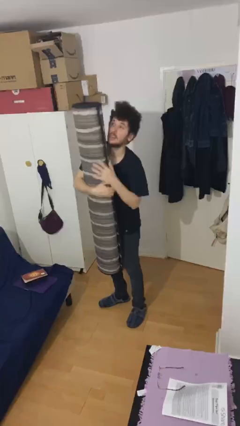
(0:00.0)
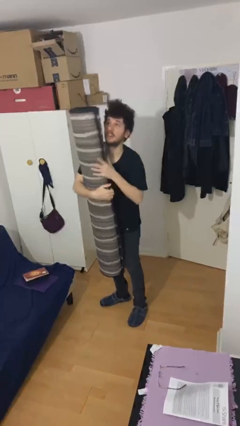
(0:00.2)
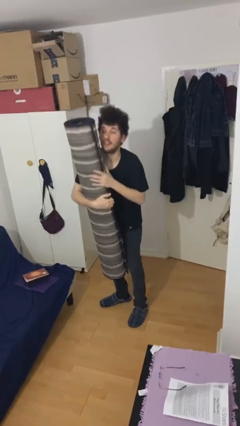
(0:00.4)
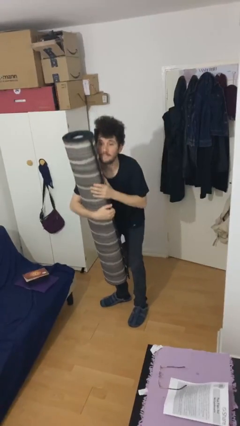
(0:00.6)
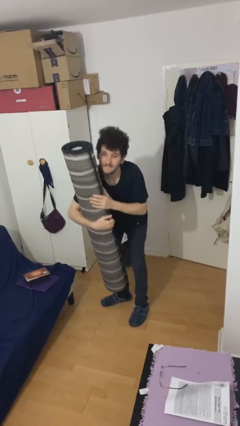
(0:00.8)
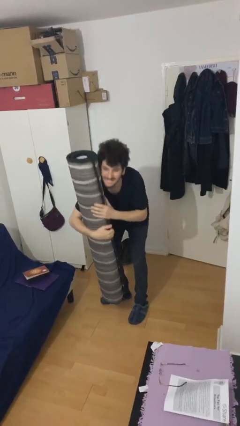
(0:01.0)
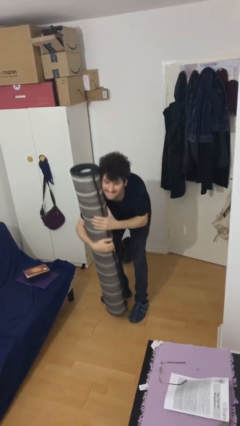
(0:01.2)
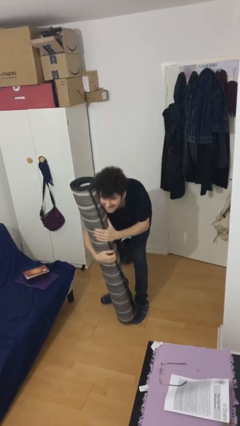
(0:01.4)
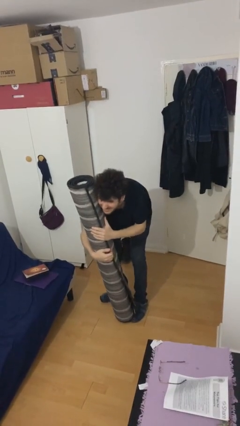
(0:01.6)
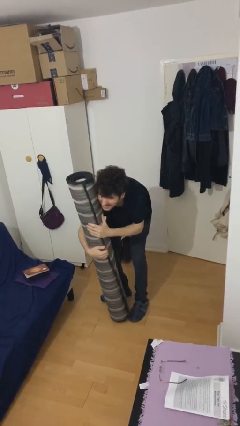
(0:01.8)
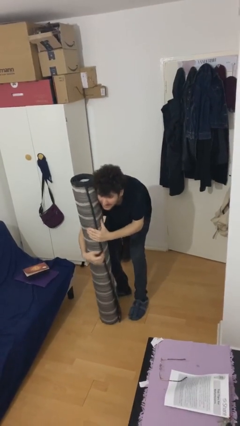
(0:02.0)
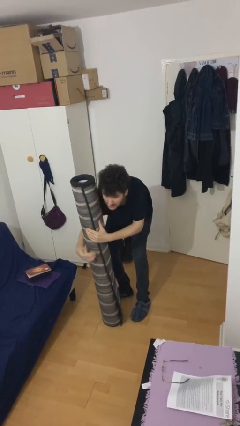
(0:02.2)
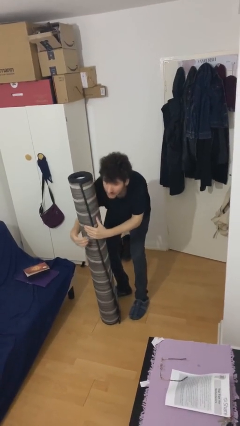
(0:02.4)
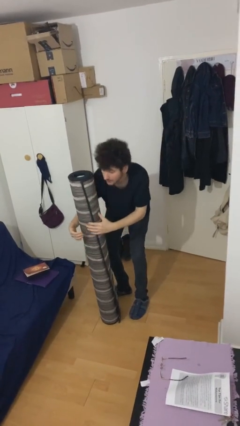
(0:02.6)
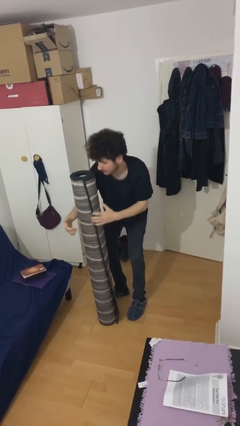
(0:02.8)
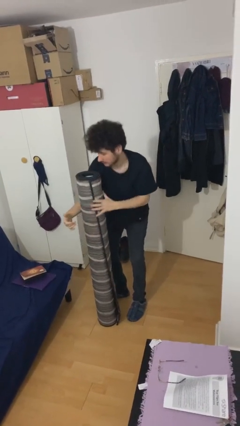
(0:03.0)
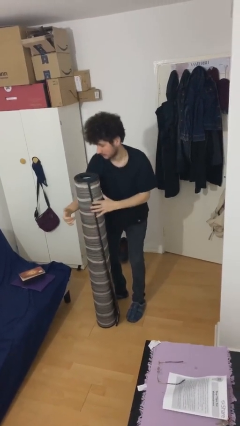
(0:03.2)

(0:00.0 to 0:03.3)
person puts down object on floor

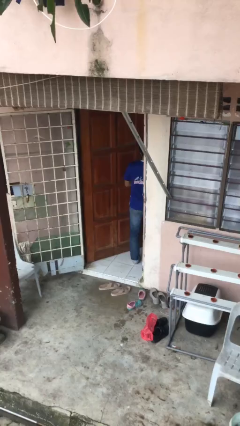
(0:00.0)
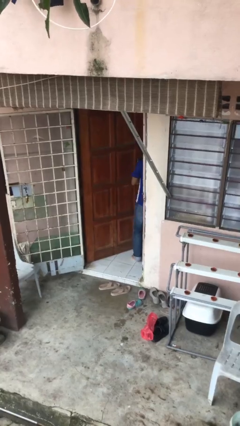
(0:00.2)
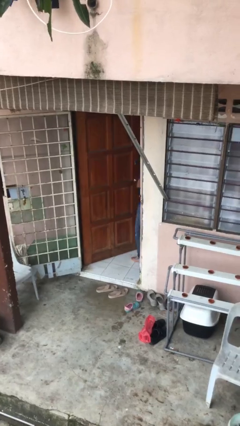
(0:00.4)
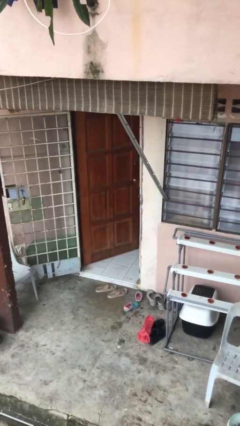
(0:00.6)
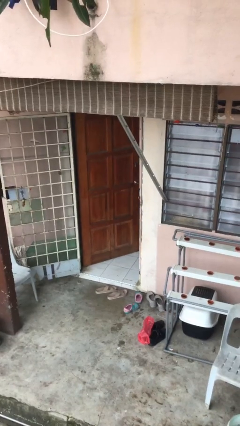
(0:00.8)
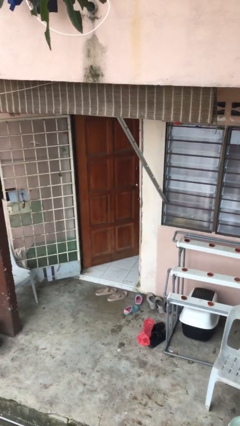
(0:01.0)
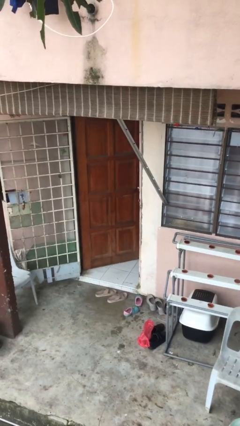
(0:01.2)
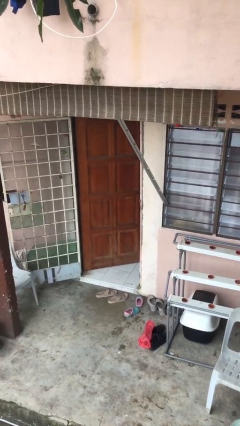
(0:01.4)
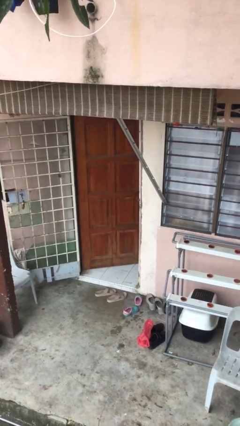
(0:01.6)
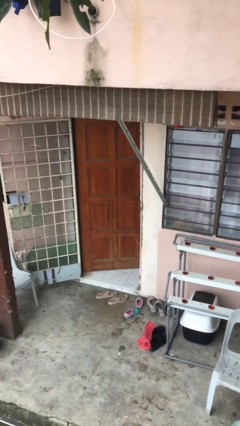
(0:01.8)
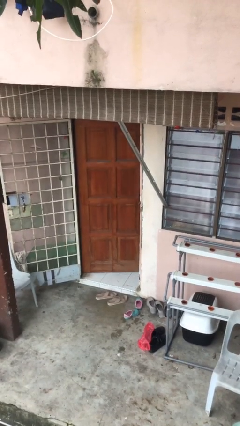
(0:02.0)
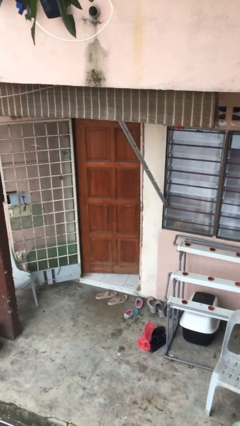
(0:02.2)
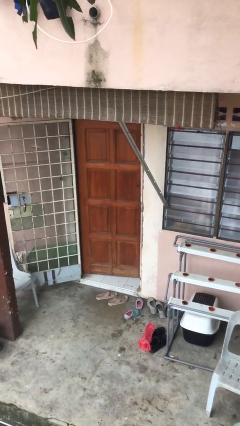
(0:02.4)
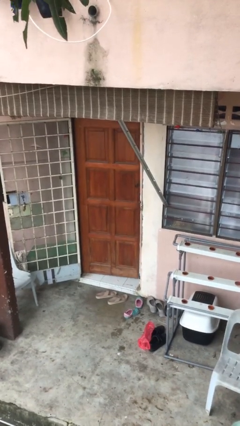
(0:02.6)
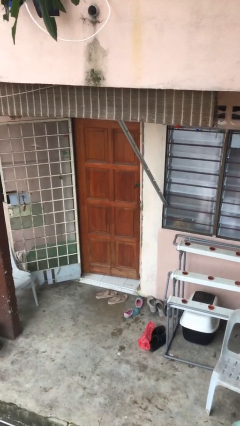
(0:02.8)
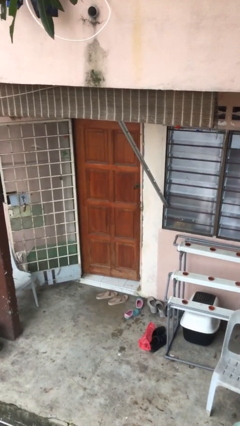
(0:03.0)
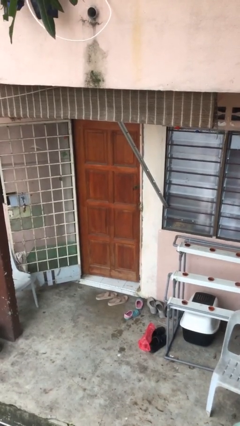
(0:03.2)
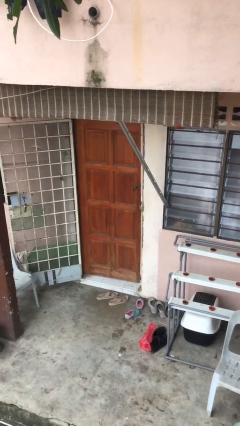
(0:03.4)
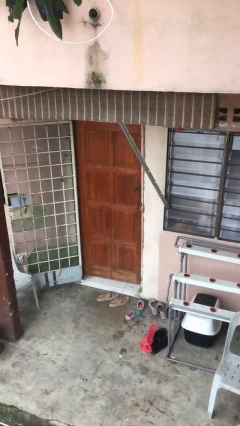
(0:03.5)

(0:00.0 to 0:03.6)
person closes facility door

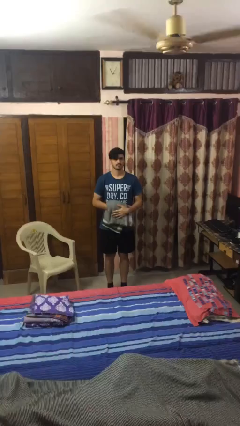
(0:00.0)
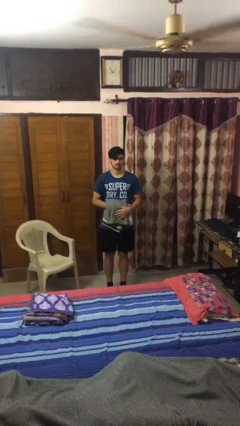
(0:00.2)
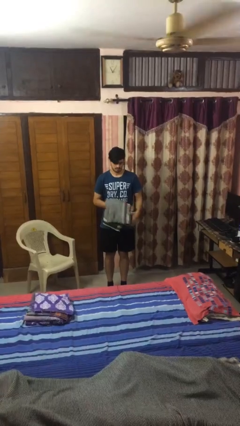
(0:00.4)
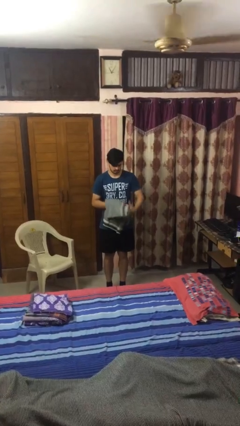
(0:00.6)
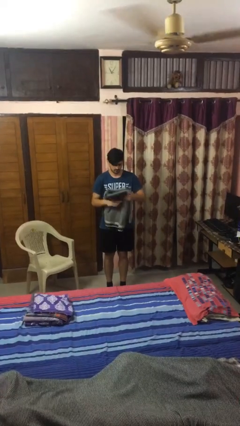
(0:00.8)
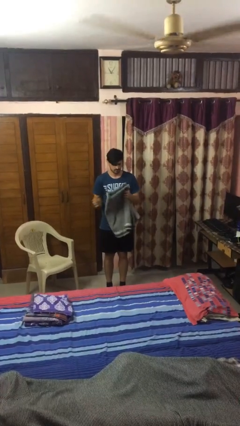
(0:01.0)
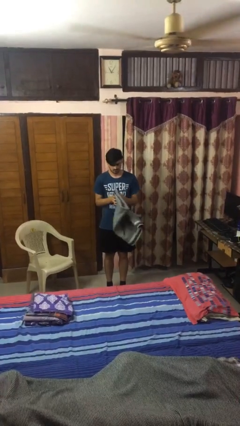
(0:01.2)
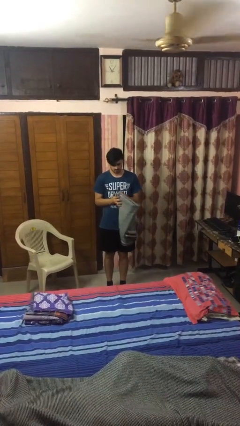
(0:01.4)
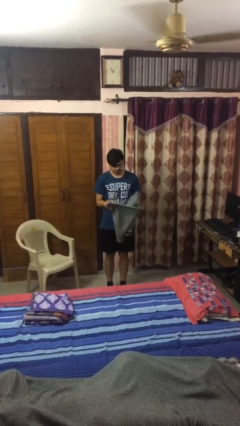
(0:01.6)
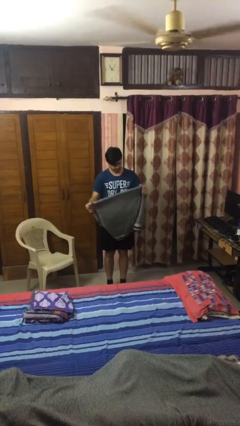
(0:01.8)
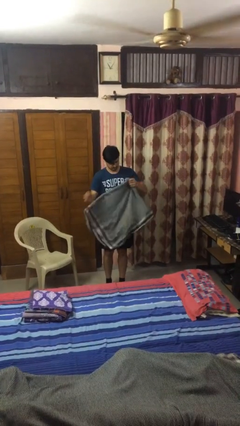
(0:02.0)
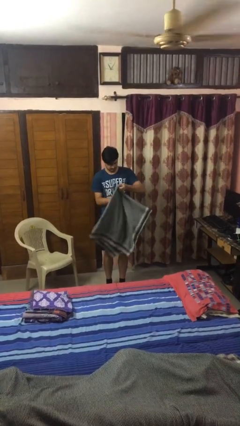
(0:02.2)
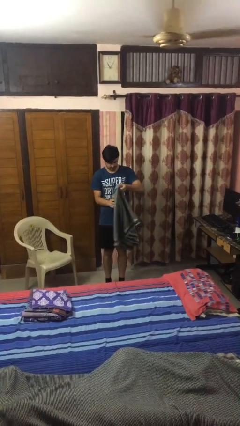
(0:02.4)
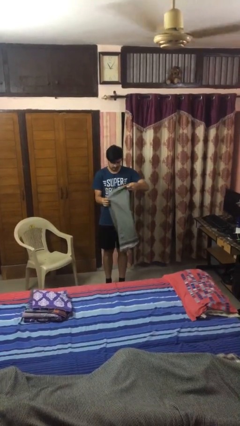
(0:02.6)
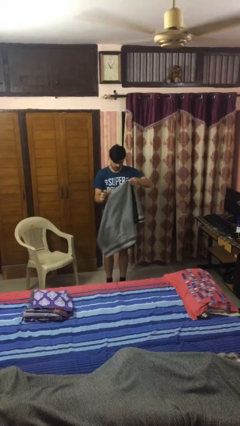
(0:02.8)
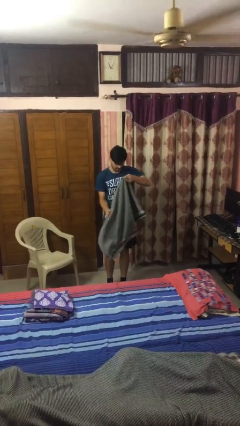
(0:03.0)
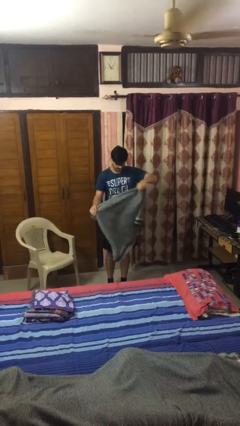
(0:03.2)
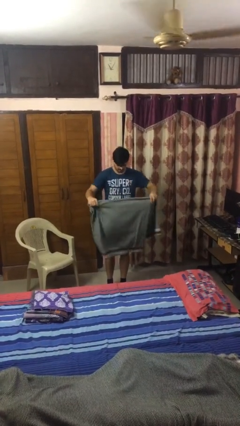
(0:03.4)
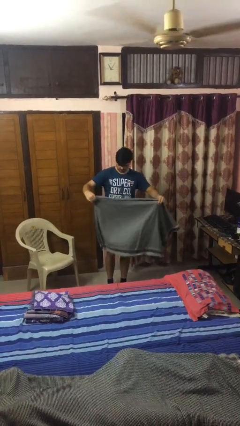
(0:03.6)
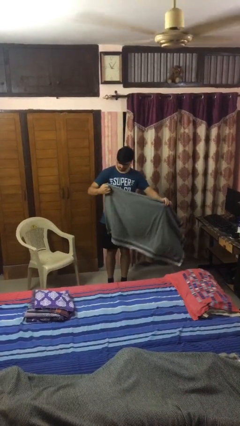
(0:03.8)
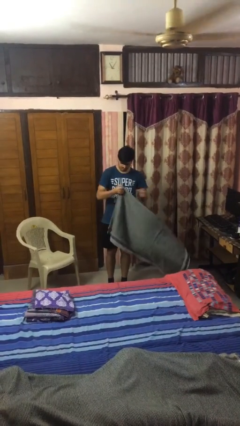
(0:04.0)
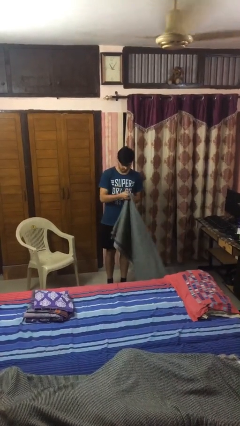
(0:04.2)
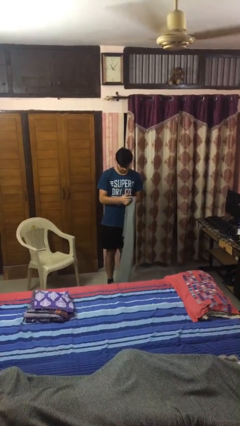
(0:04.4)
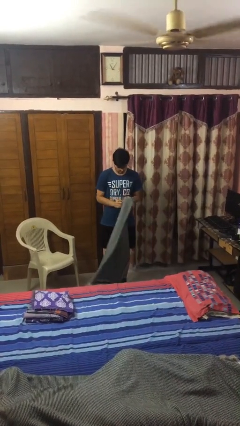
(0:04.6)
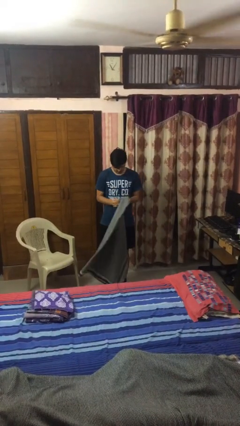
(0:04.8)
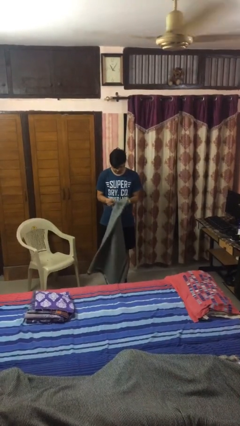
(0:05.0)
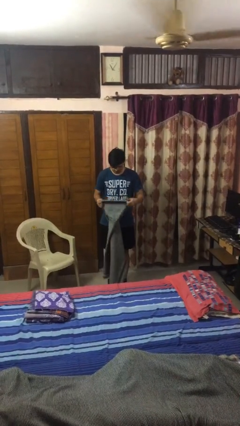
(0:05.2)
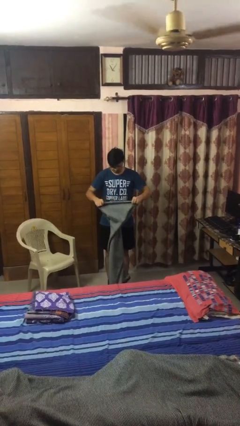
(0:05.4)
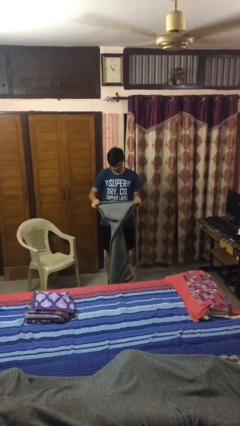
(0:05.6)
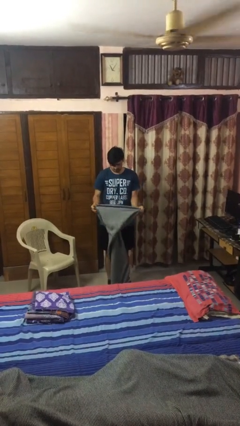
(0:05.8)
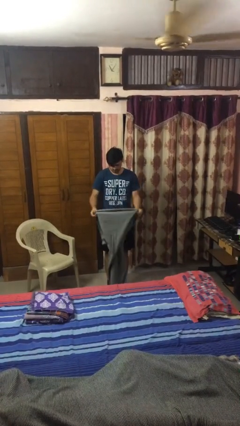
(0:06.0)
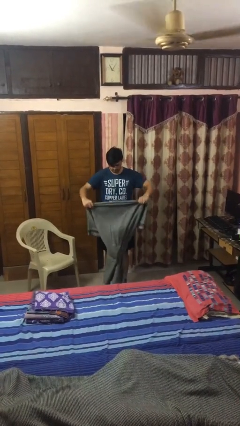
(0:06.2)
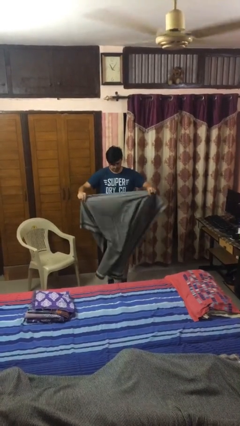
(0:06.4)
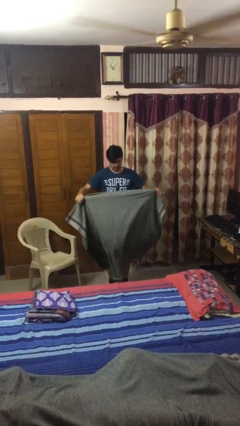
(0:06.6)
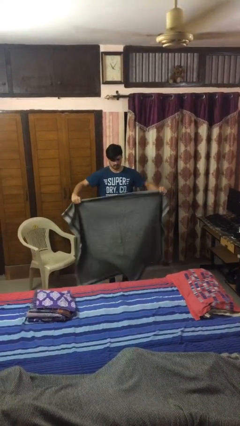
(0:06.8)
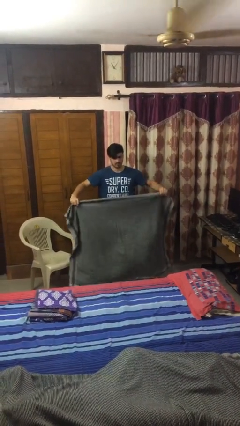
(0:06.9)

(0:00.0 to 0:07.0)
person unfolds blanket

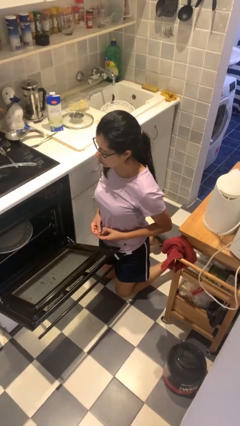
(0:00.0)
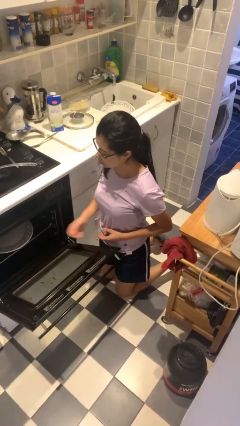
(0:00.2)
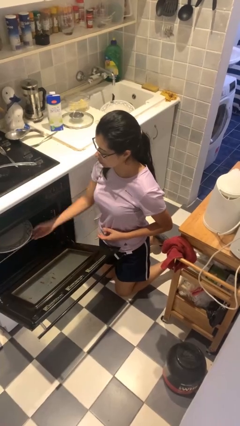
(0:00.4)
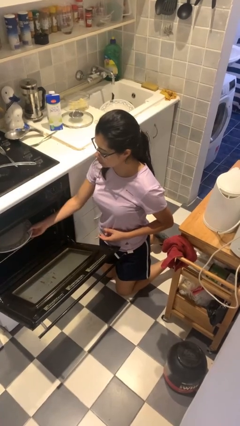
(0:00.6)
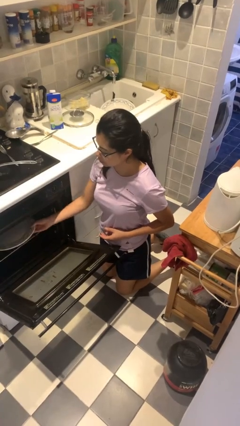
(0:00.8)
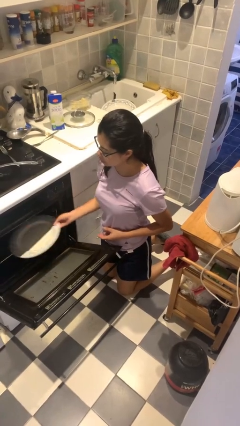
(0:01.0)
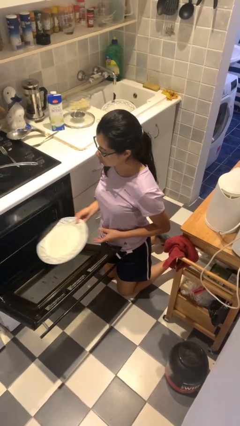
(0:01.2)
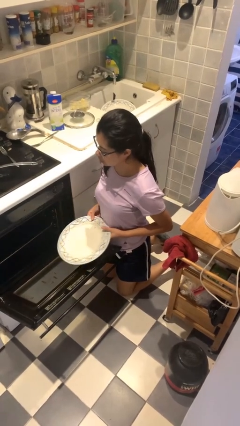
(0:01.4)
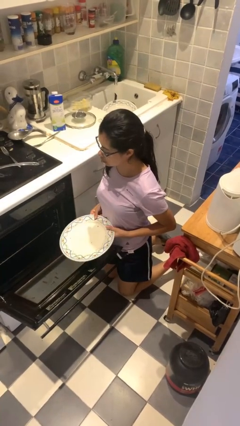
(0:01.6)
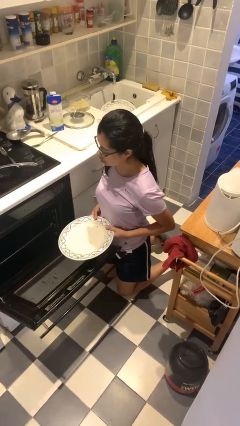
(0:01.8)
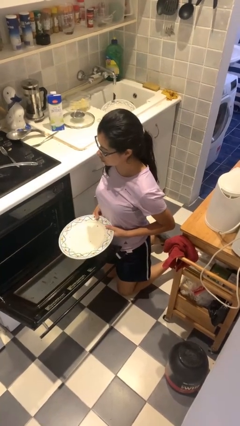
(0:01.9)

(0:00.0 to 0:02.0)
person unloads dishwasher

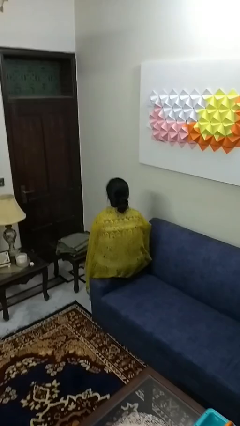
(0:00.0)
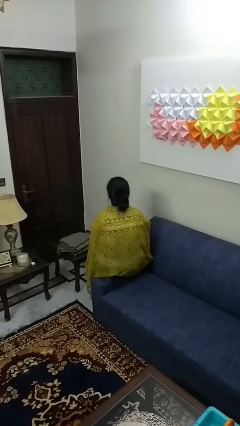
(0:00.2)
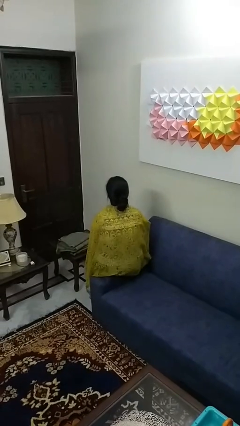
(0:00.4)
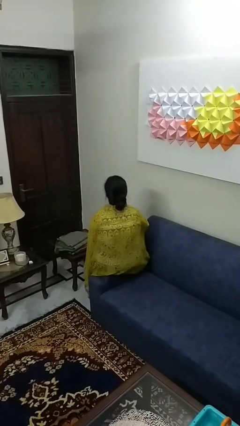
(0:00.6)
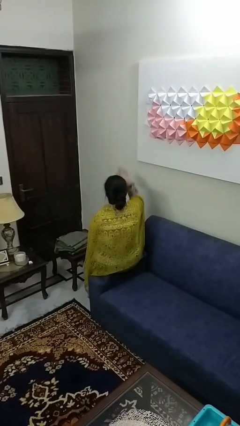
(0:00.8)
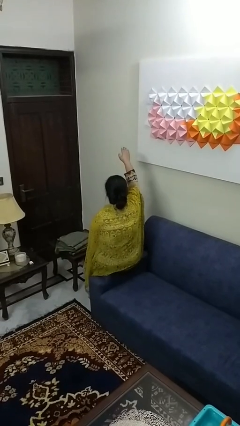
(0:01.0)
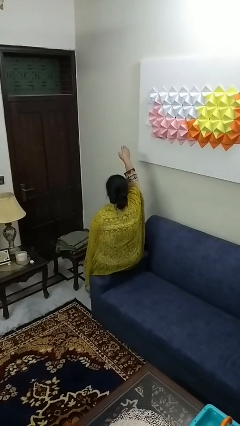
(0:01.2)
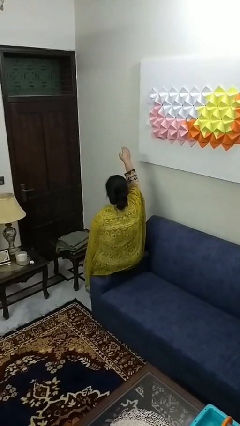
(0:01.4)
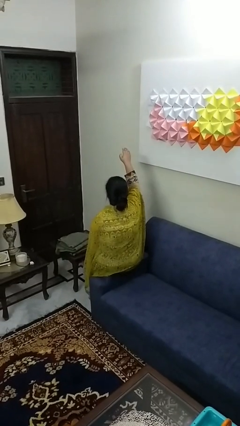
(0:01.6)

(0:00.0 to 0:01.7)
person gestures swipe up
